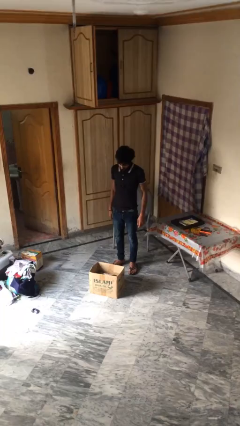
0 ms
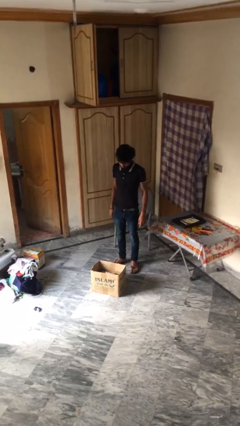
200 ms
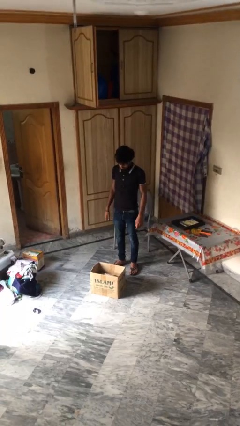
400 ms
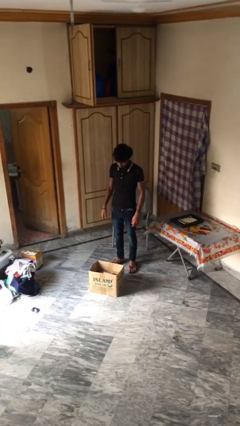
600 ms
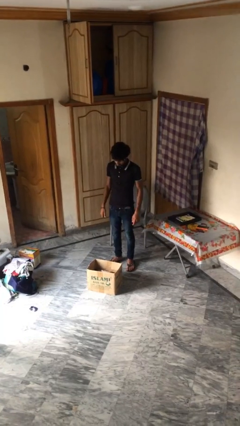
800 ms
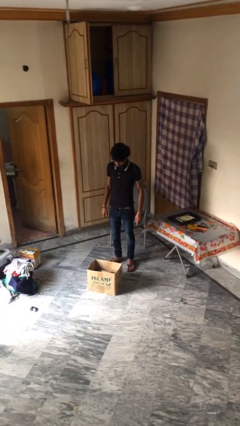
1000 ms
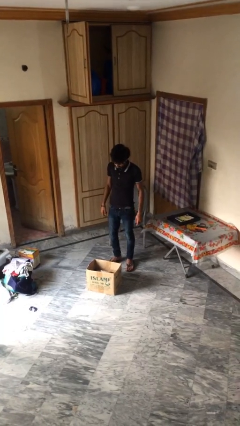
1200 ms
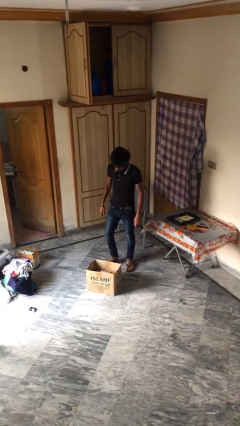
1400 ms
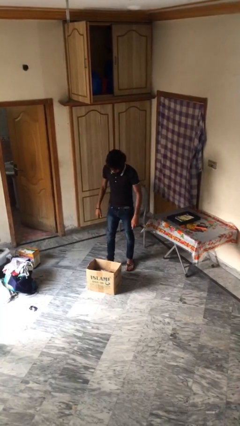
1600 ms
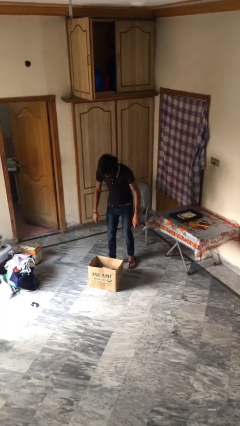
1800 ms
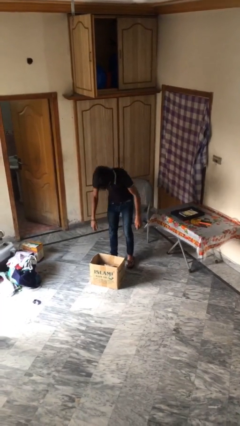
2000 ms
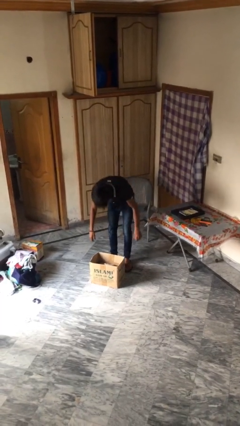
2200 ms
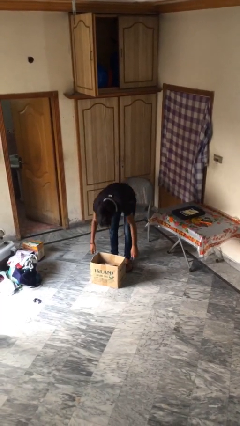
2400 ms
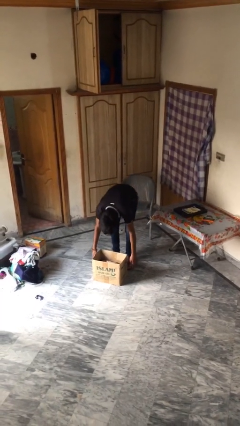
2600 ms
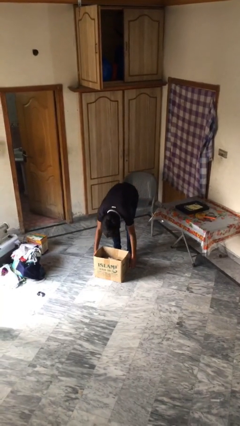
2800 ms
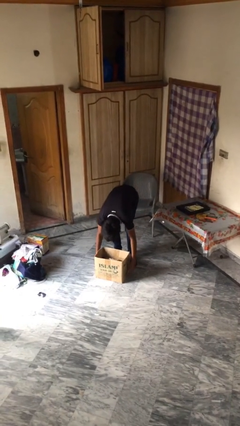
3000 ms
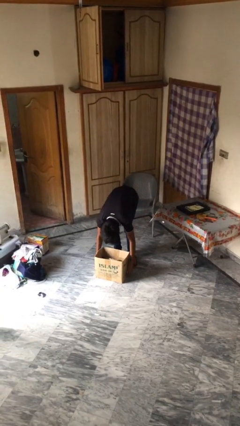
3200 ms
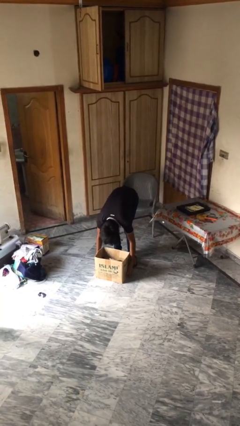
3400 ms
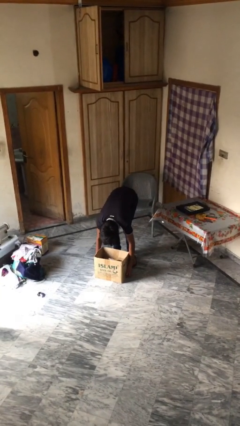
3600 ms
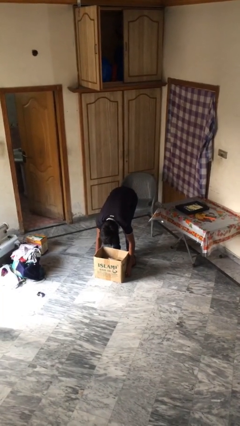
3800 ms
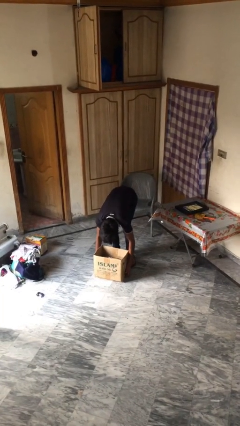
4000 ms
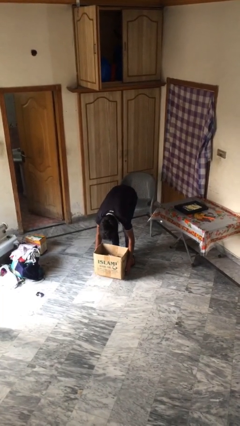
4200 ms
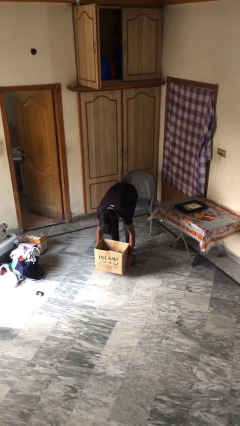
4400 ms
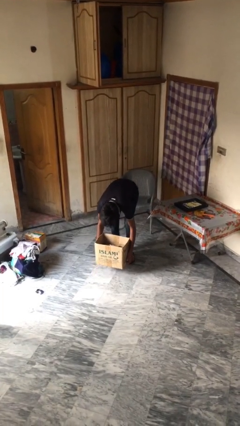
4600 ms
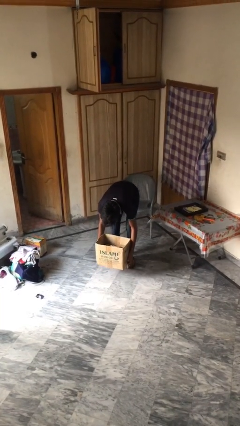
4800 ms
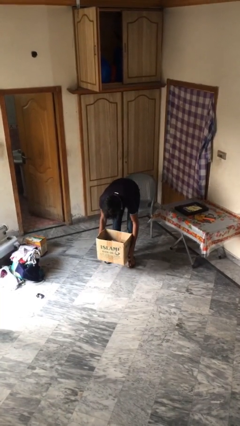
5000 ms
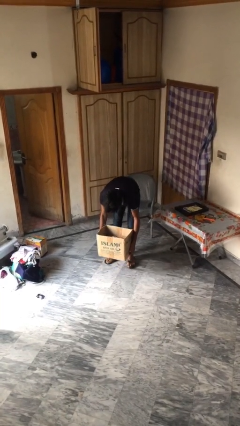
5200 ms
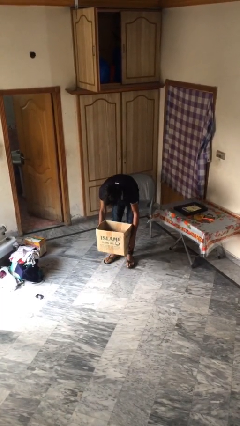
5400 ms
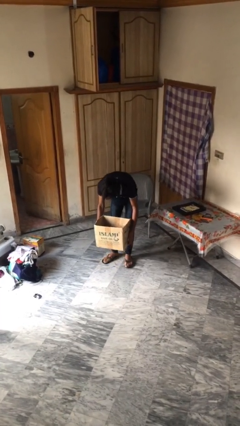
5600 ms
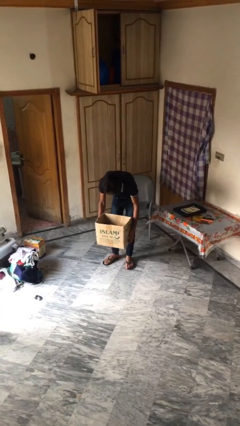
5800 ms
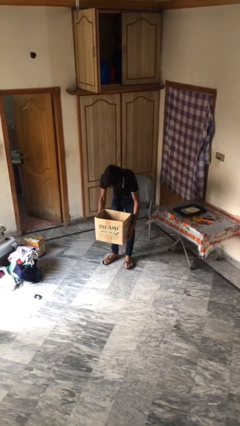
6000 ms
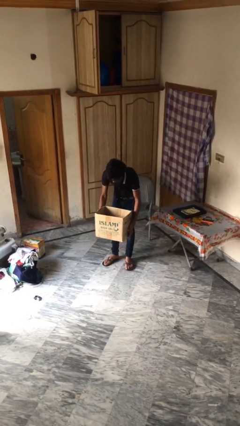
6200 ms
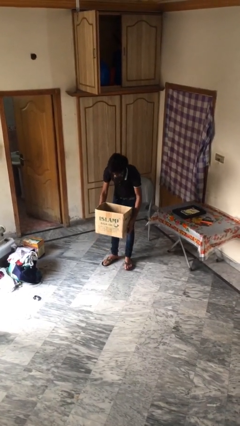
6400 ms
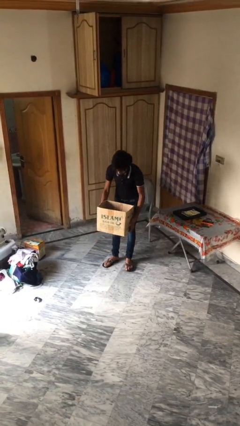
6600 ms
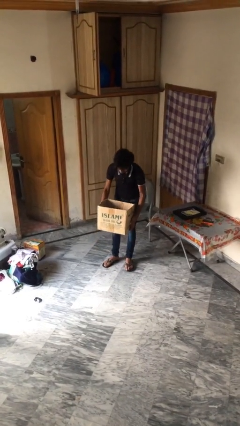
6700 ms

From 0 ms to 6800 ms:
person picks up object from floor

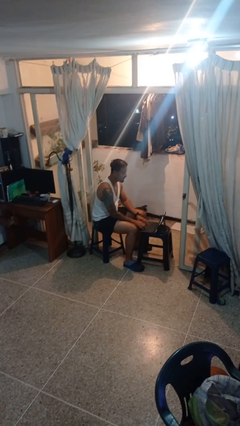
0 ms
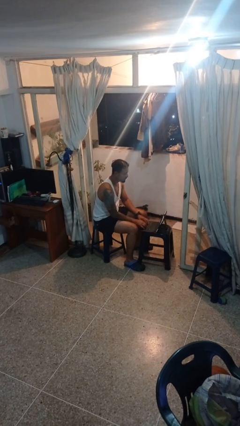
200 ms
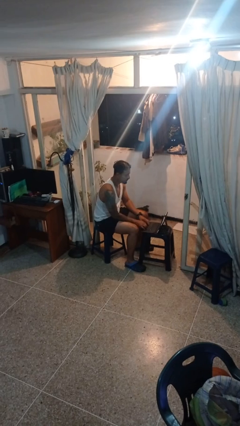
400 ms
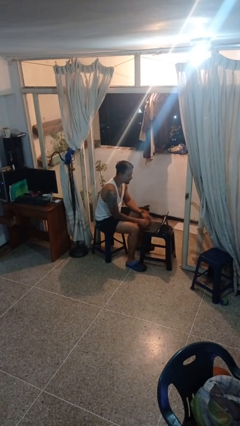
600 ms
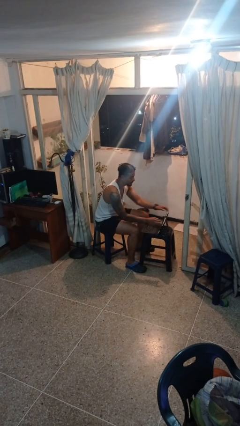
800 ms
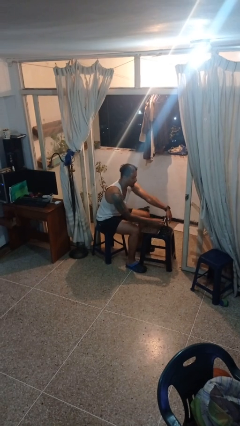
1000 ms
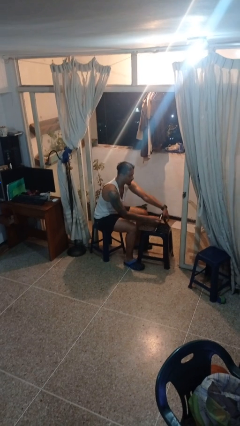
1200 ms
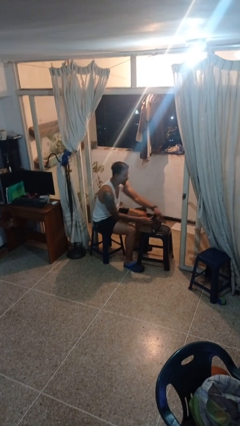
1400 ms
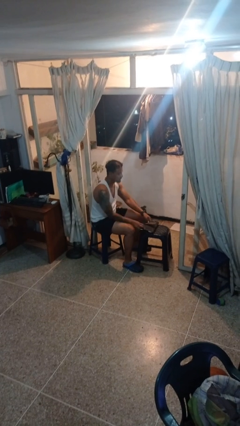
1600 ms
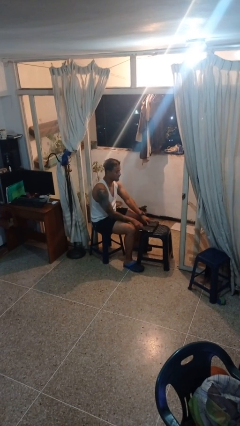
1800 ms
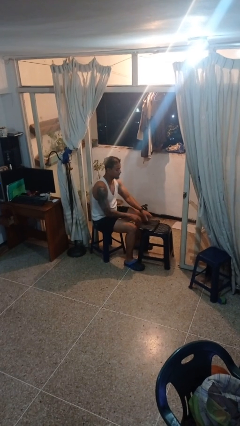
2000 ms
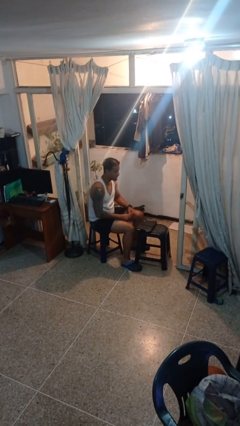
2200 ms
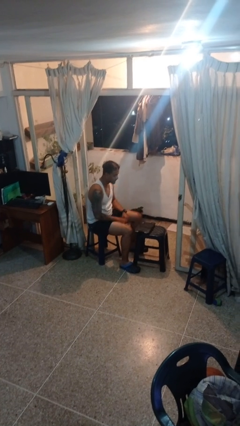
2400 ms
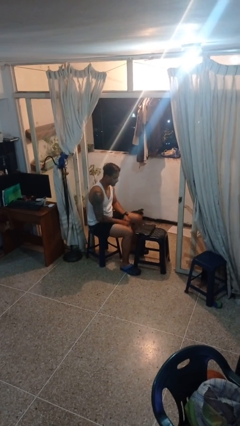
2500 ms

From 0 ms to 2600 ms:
person closes laptop

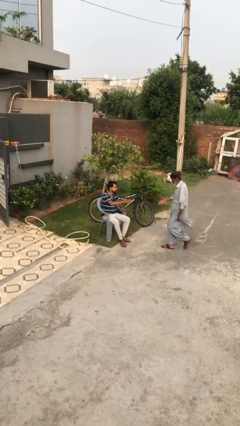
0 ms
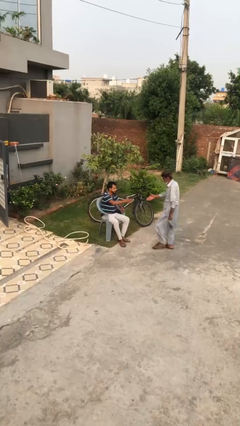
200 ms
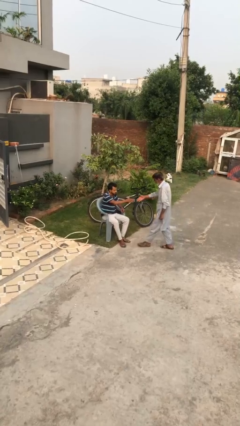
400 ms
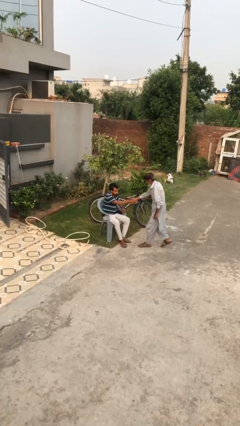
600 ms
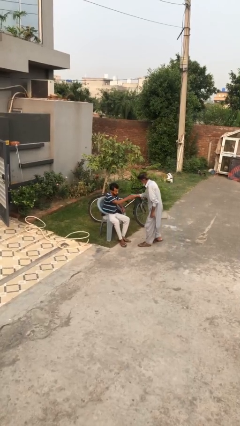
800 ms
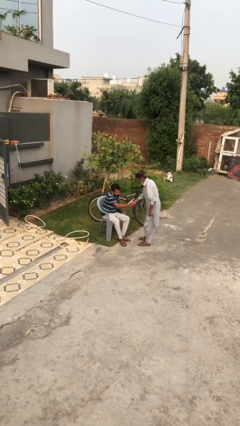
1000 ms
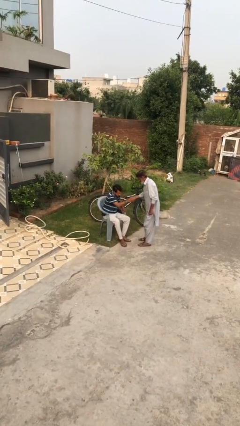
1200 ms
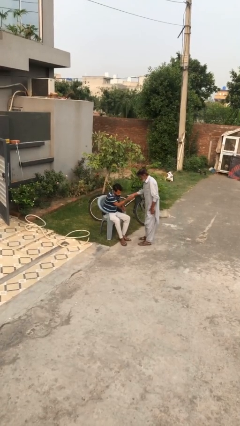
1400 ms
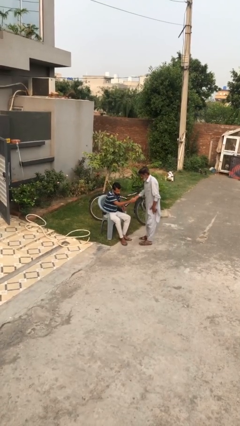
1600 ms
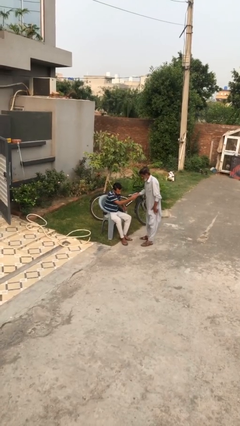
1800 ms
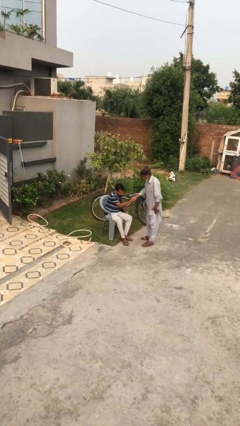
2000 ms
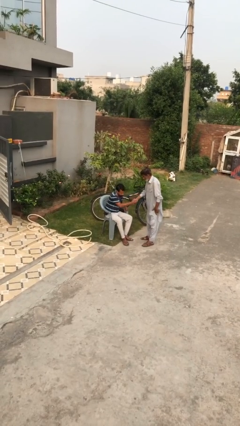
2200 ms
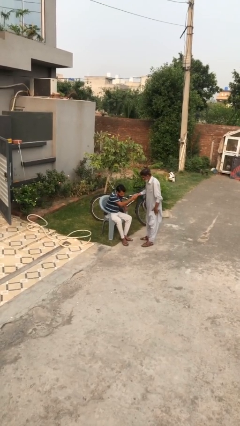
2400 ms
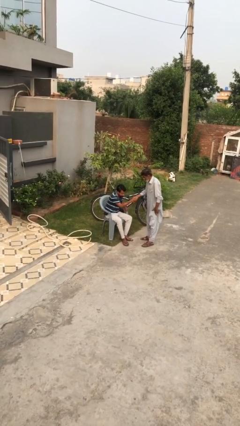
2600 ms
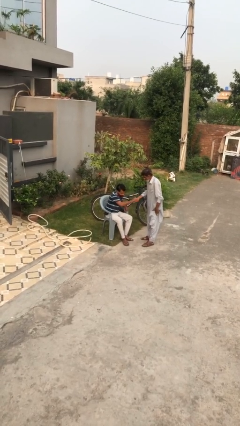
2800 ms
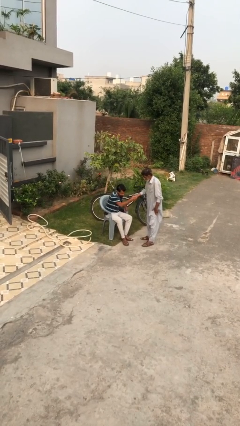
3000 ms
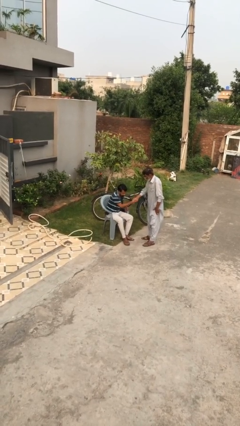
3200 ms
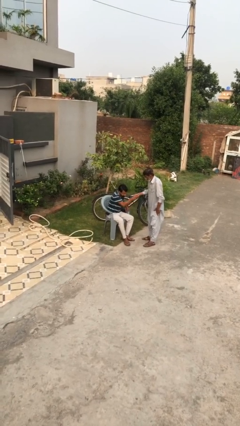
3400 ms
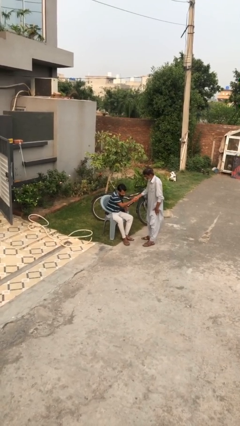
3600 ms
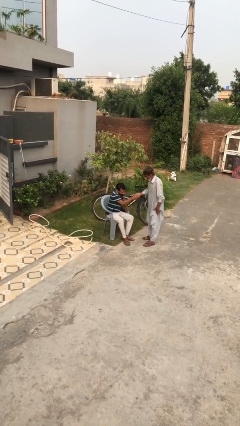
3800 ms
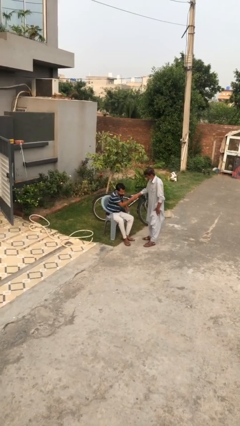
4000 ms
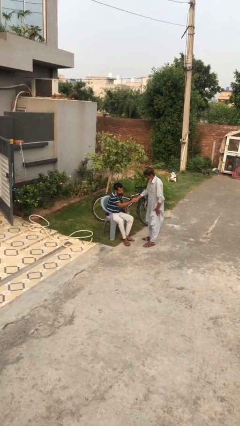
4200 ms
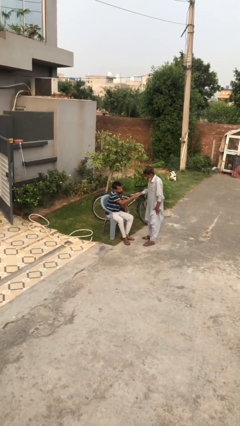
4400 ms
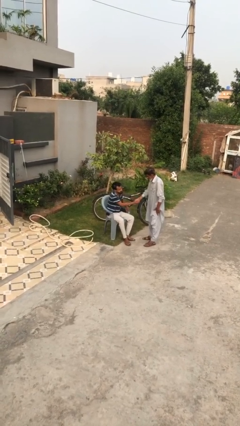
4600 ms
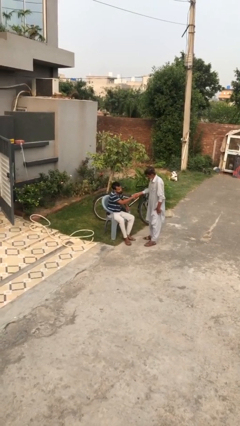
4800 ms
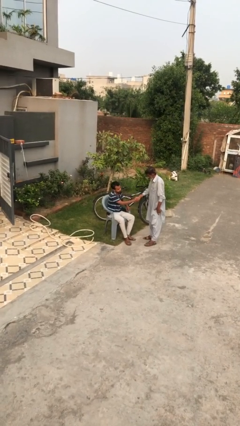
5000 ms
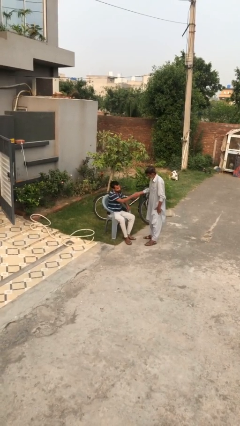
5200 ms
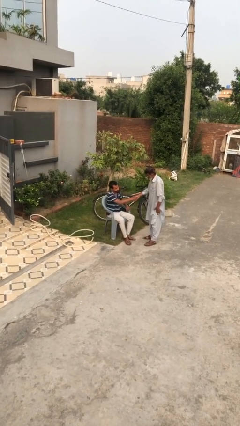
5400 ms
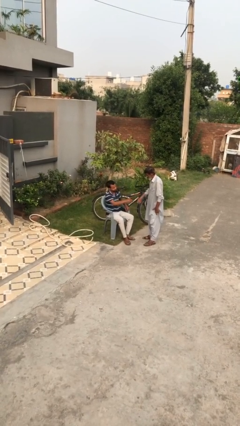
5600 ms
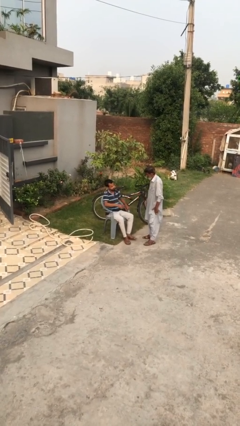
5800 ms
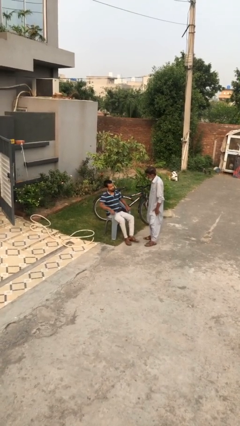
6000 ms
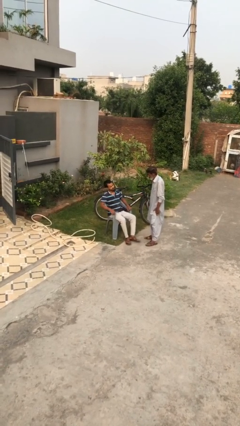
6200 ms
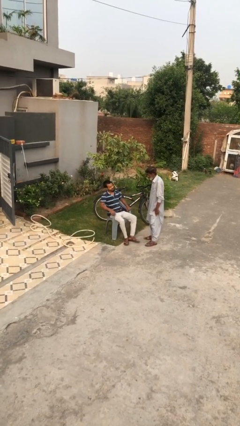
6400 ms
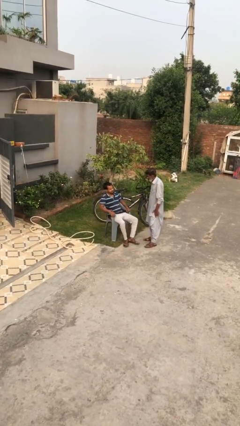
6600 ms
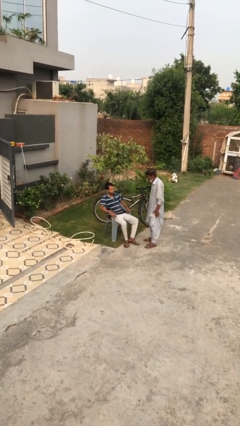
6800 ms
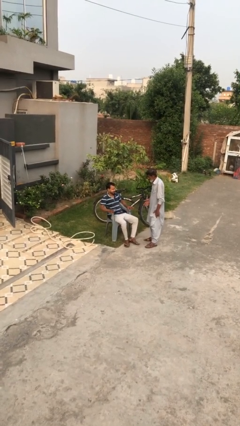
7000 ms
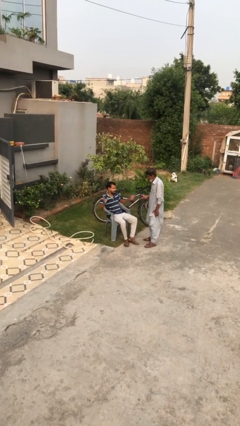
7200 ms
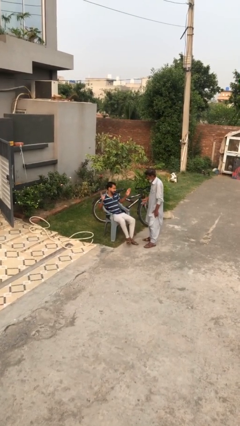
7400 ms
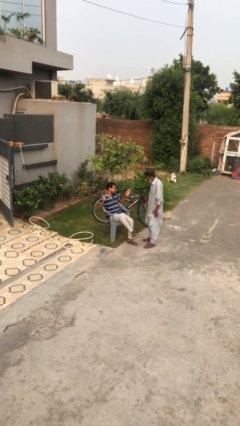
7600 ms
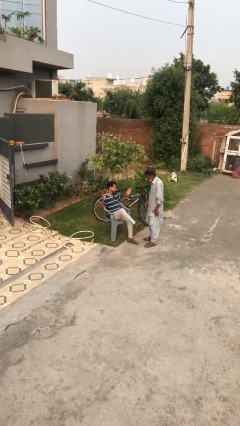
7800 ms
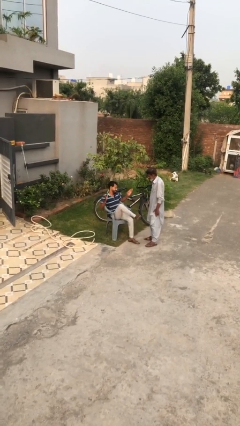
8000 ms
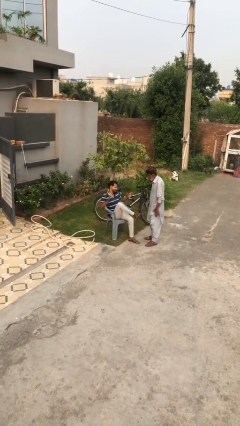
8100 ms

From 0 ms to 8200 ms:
person shakes hand
